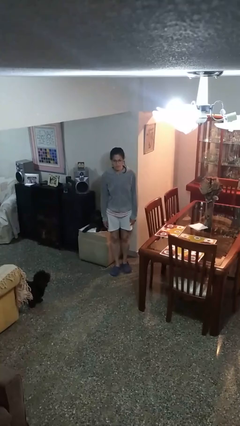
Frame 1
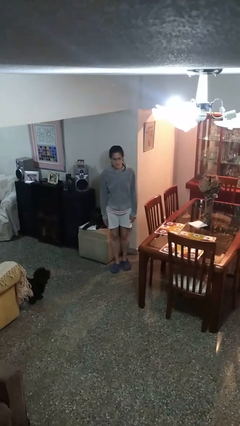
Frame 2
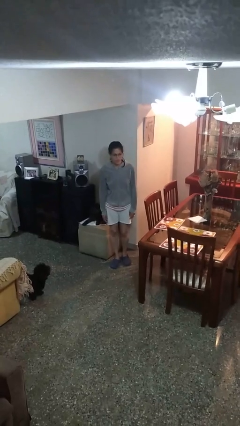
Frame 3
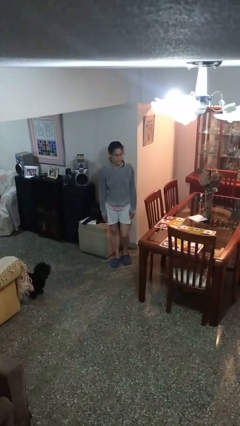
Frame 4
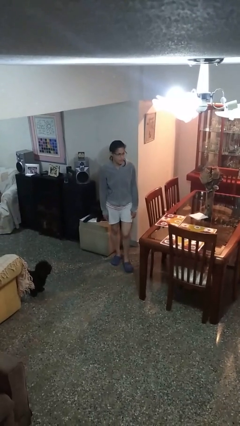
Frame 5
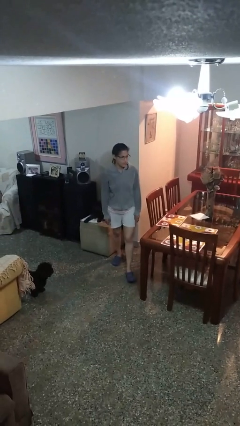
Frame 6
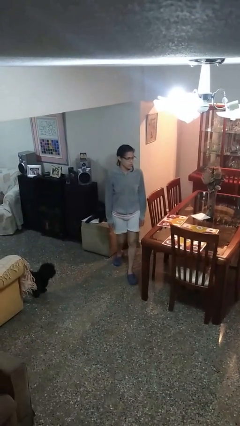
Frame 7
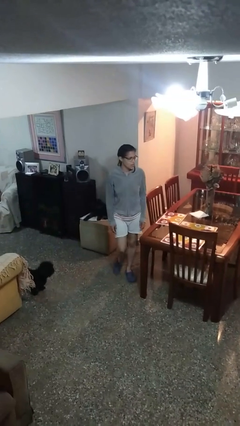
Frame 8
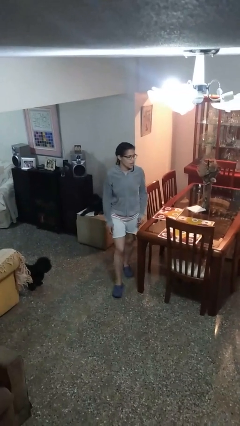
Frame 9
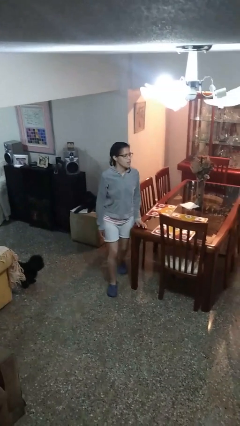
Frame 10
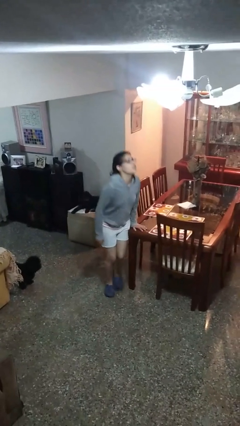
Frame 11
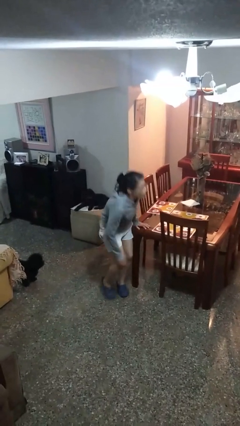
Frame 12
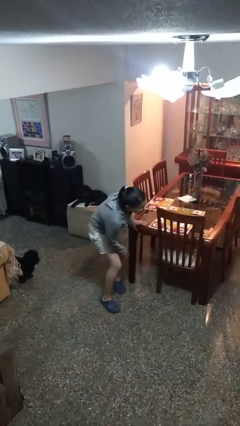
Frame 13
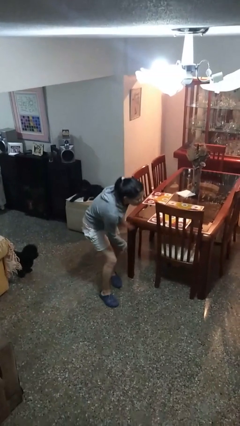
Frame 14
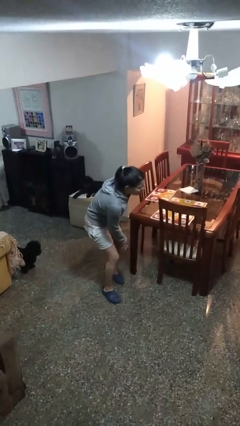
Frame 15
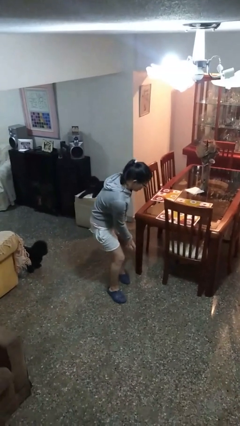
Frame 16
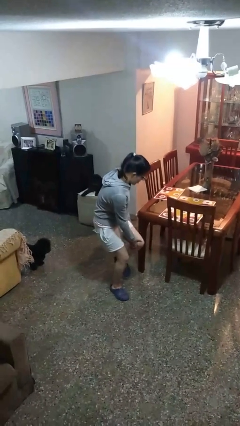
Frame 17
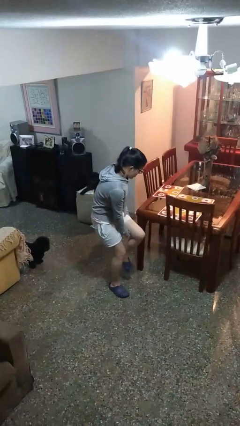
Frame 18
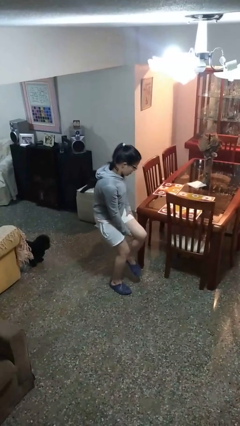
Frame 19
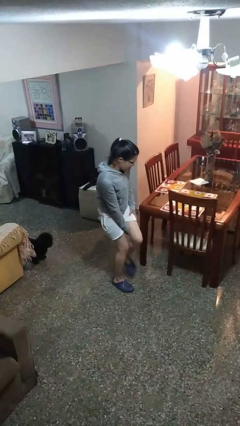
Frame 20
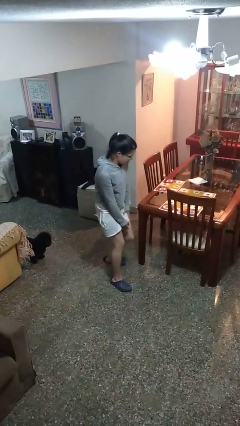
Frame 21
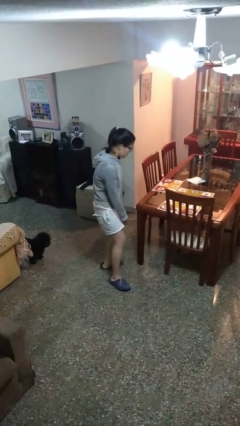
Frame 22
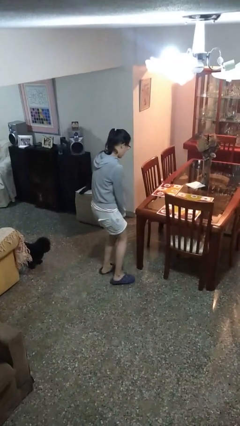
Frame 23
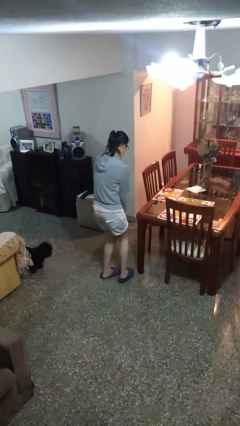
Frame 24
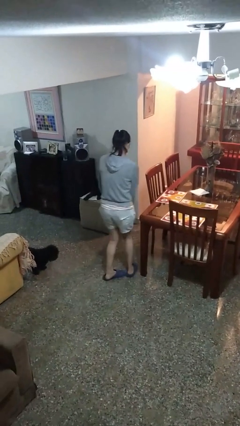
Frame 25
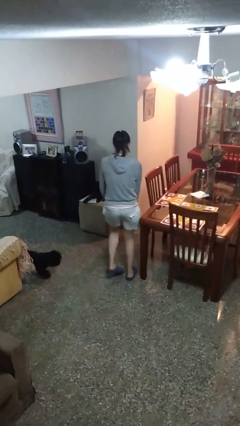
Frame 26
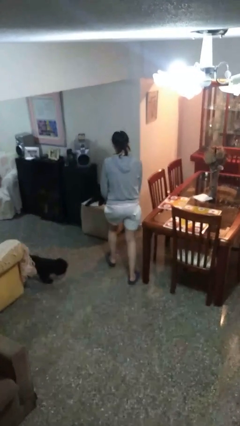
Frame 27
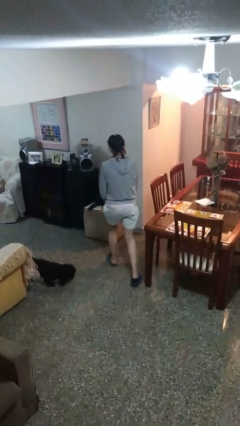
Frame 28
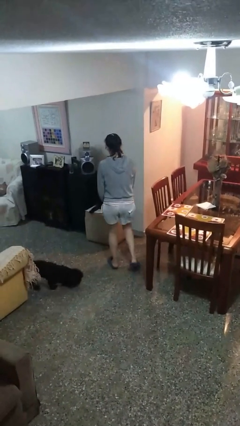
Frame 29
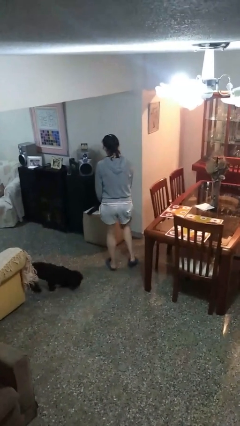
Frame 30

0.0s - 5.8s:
person bumps into table

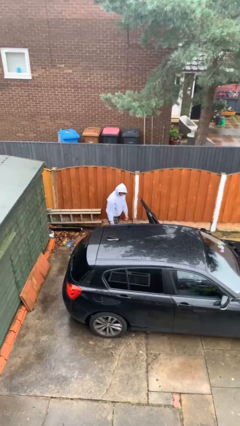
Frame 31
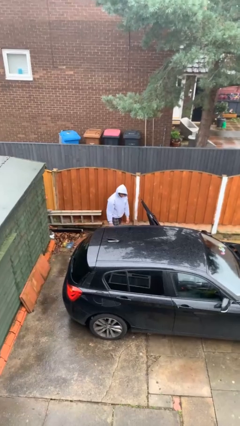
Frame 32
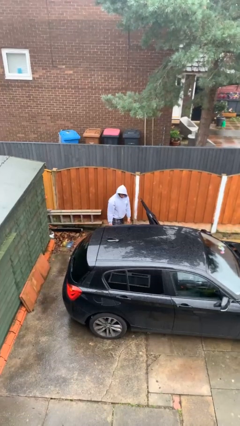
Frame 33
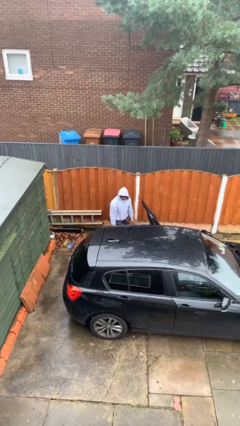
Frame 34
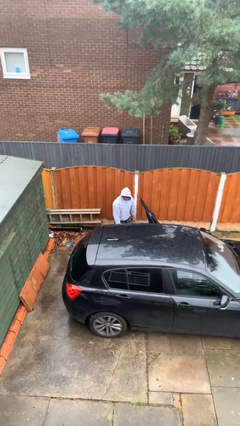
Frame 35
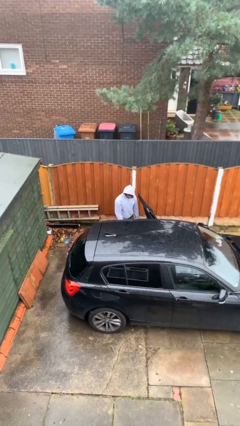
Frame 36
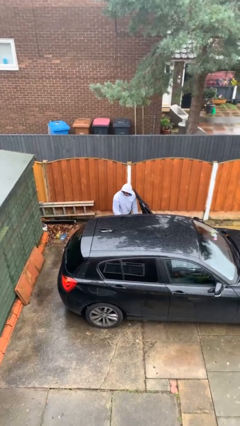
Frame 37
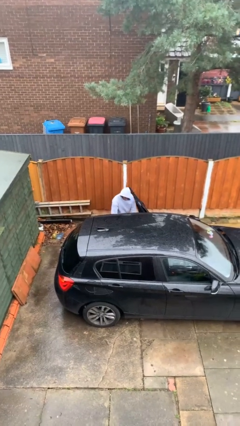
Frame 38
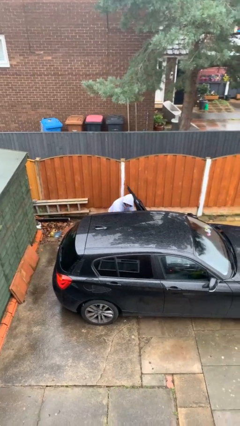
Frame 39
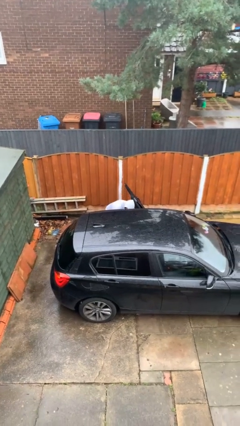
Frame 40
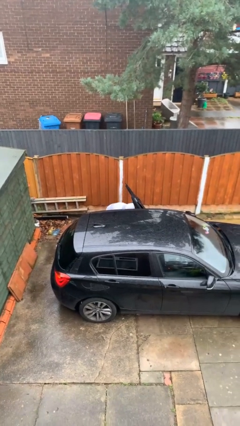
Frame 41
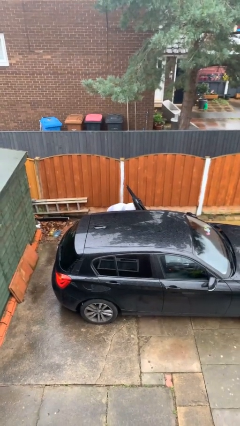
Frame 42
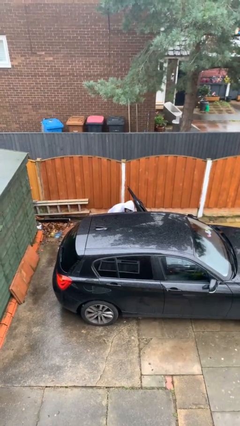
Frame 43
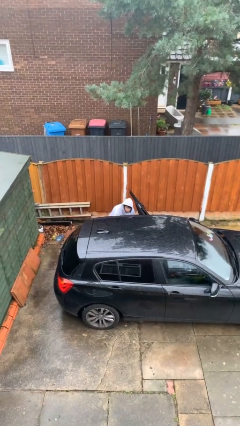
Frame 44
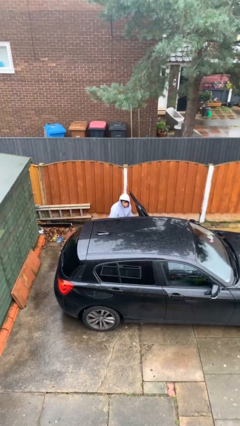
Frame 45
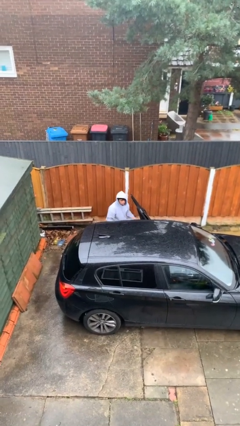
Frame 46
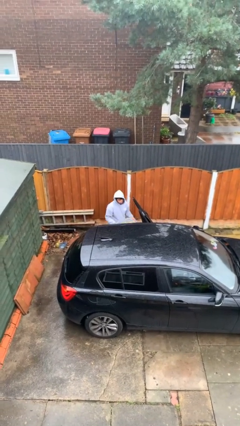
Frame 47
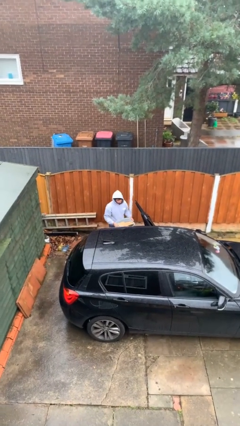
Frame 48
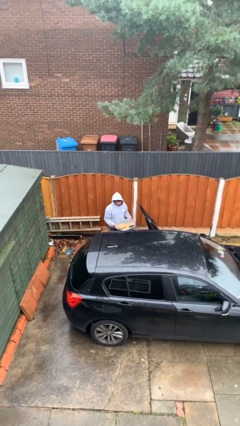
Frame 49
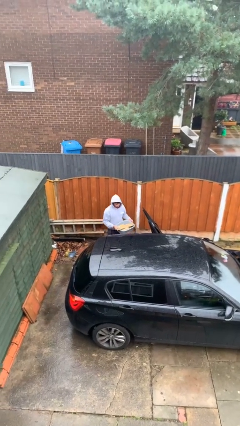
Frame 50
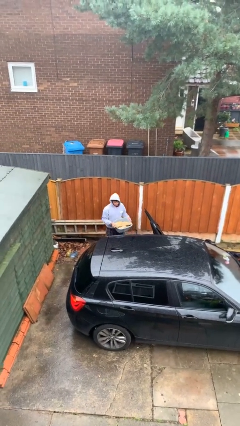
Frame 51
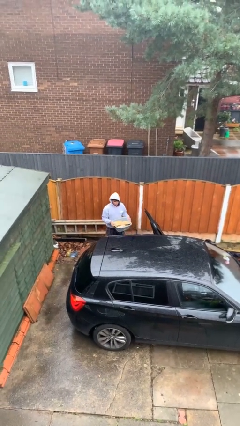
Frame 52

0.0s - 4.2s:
person unloads car

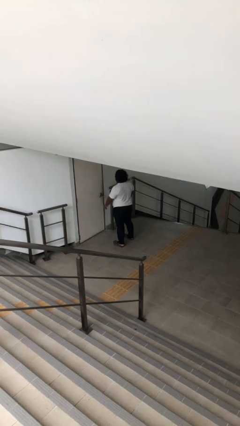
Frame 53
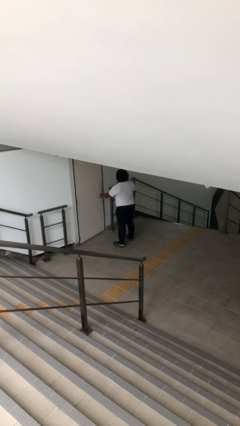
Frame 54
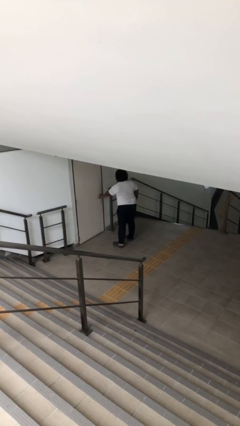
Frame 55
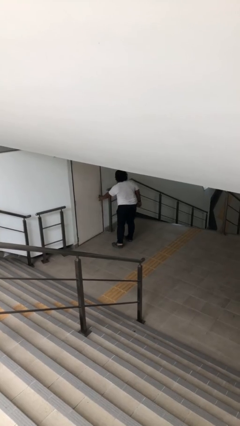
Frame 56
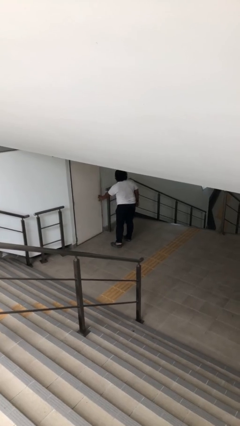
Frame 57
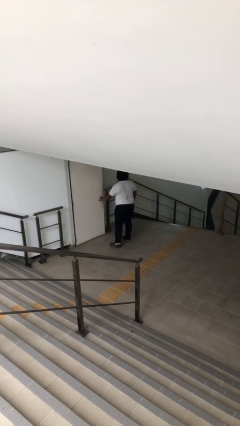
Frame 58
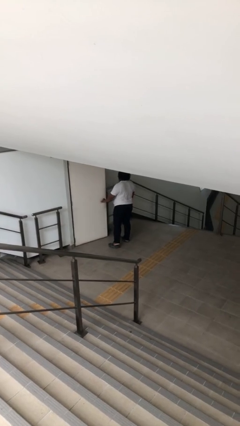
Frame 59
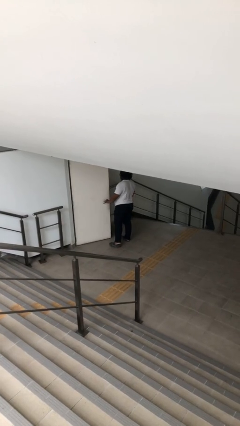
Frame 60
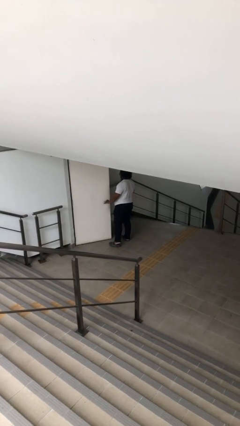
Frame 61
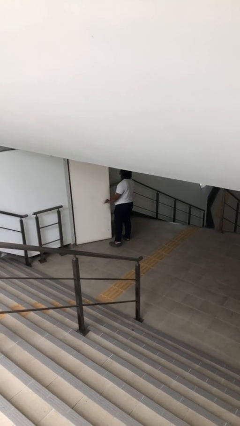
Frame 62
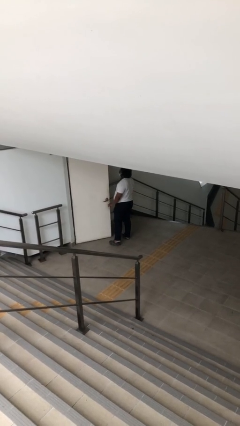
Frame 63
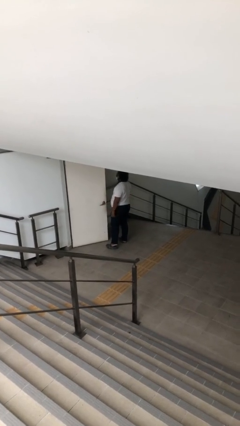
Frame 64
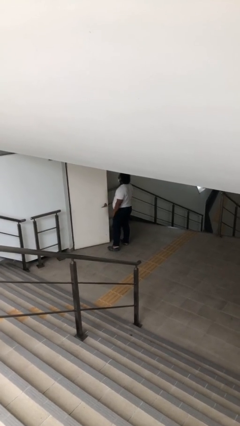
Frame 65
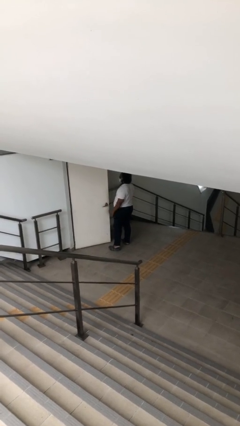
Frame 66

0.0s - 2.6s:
person opens facility door

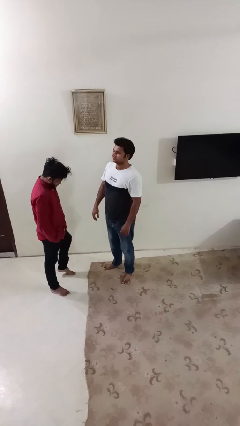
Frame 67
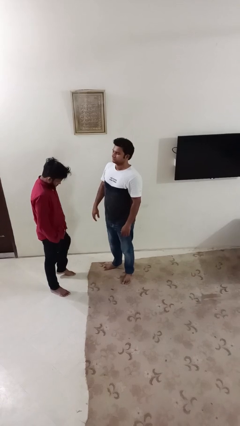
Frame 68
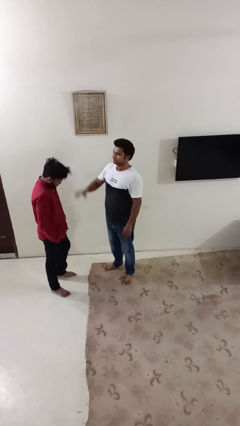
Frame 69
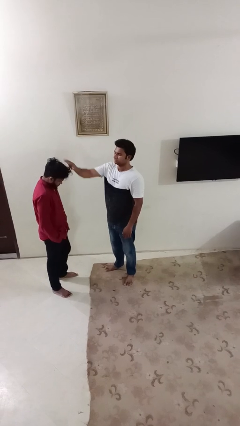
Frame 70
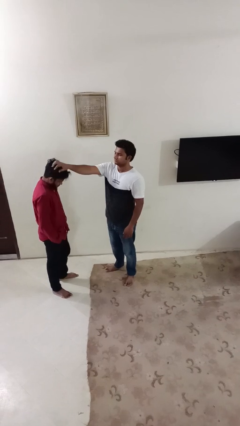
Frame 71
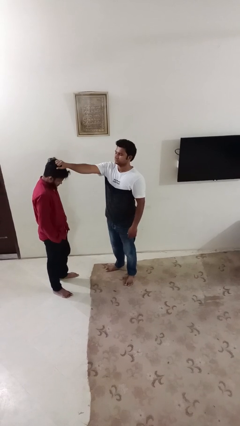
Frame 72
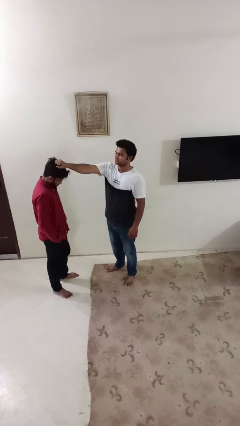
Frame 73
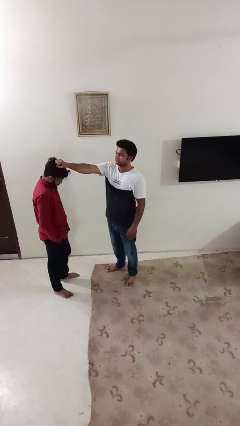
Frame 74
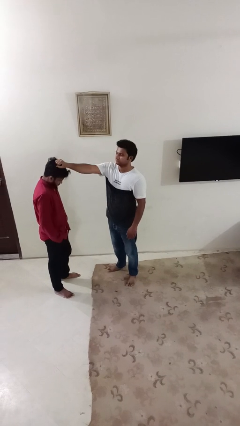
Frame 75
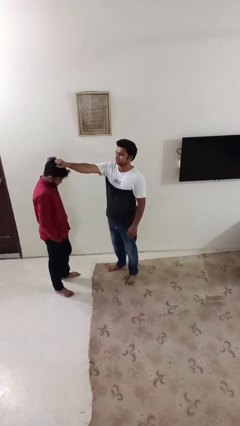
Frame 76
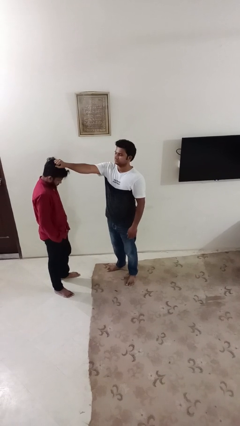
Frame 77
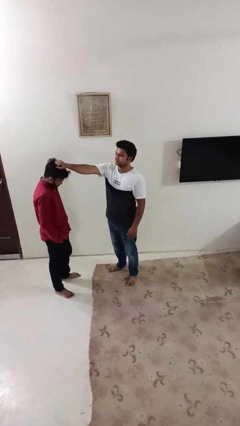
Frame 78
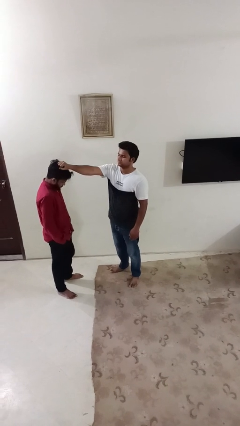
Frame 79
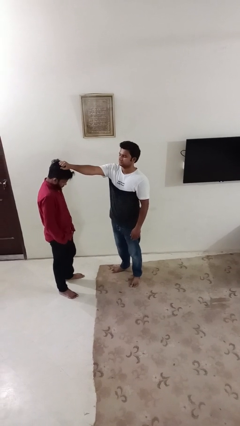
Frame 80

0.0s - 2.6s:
person grabs person by hair

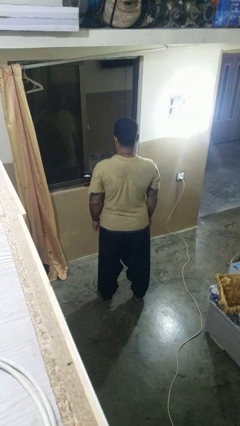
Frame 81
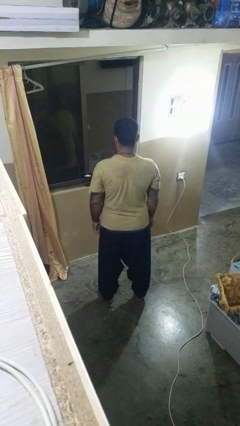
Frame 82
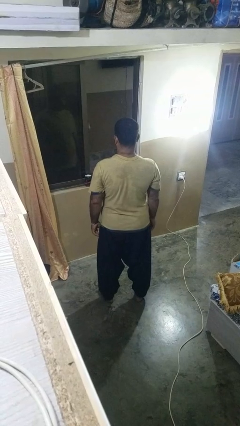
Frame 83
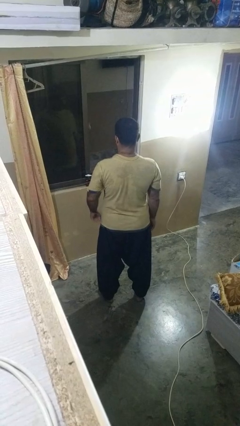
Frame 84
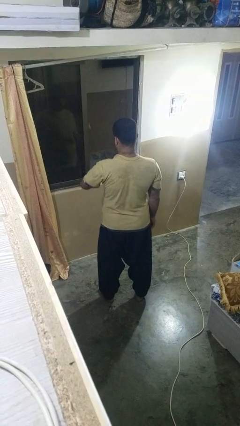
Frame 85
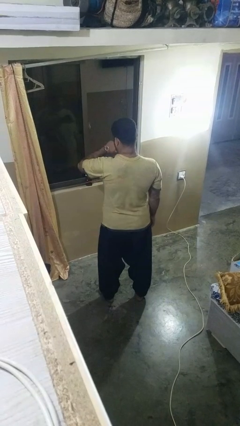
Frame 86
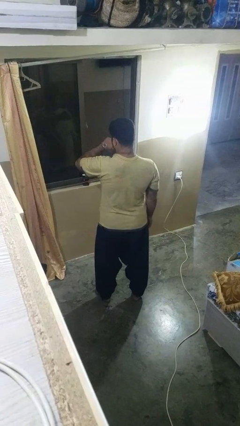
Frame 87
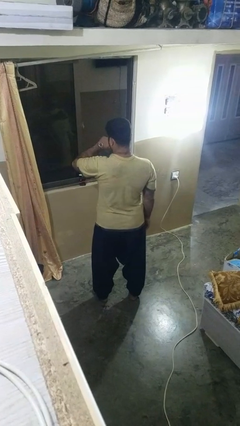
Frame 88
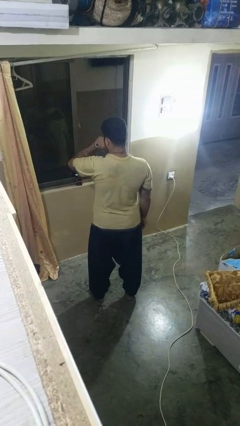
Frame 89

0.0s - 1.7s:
person looks at wristwatch

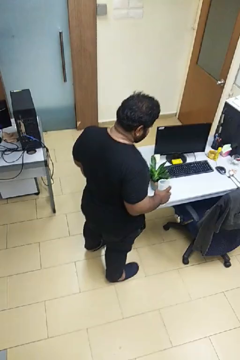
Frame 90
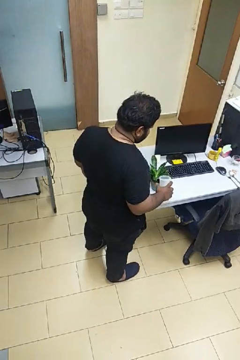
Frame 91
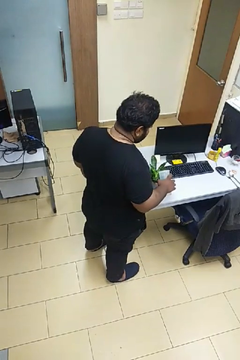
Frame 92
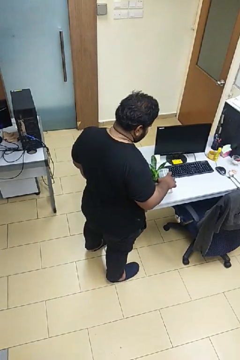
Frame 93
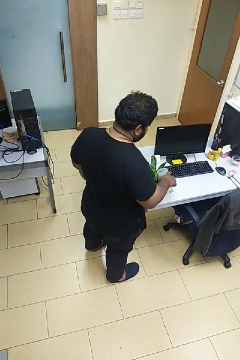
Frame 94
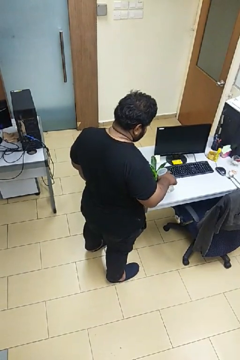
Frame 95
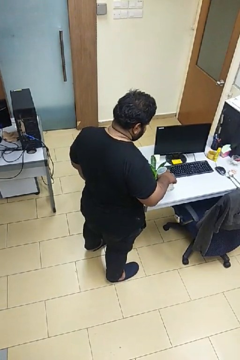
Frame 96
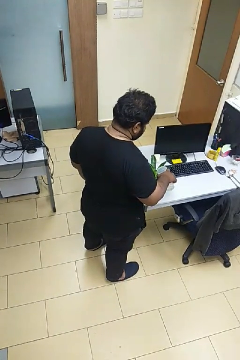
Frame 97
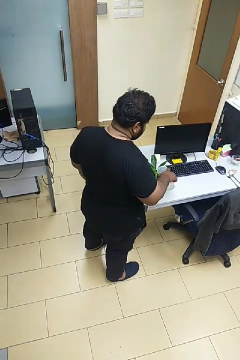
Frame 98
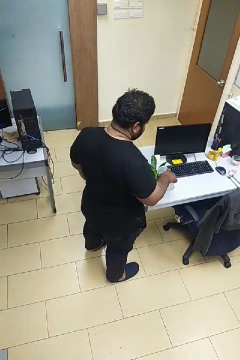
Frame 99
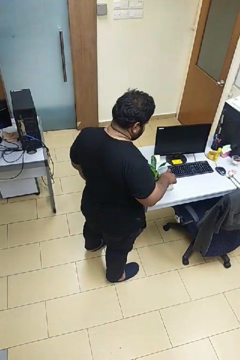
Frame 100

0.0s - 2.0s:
person waters houseplant
